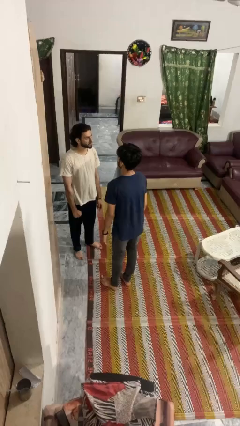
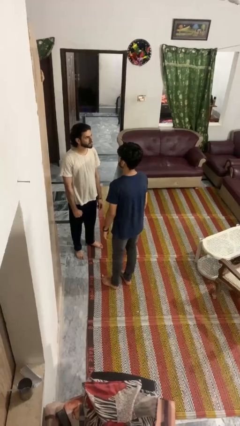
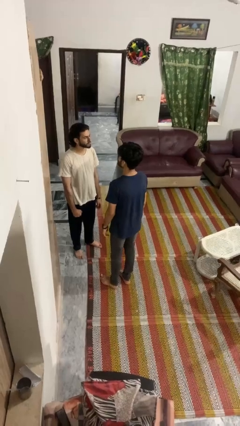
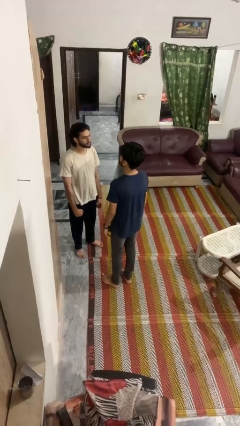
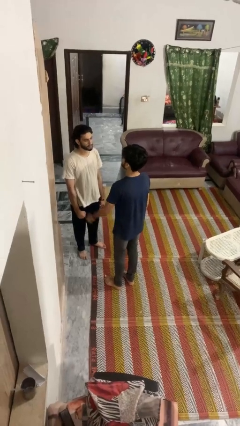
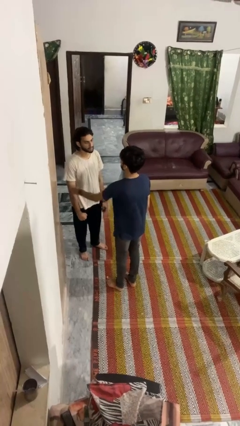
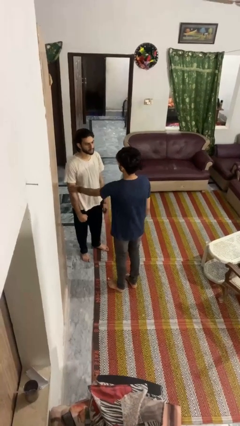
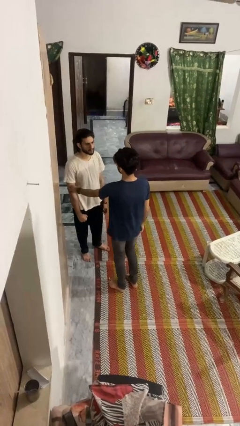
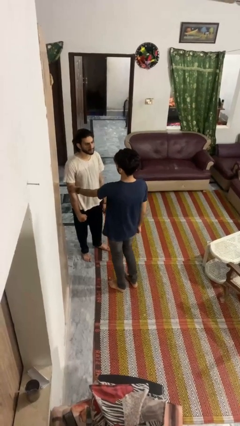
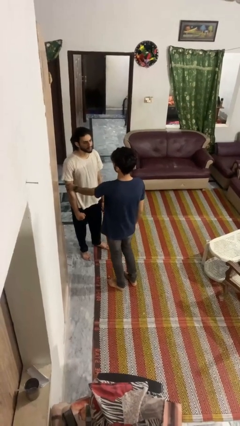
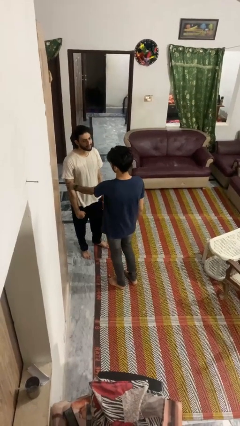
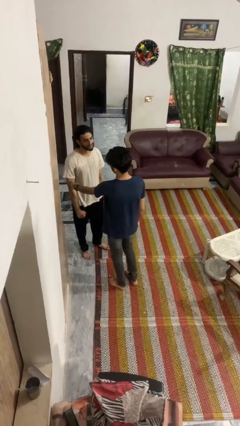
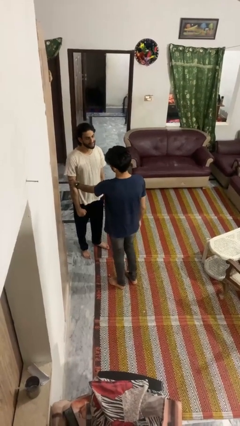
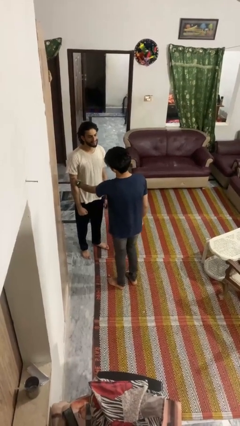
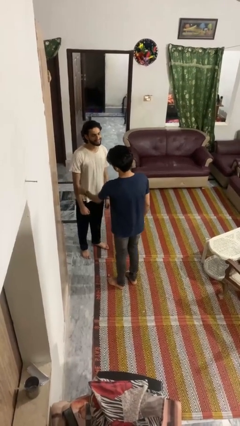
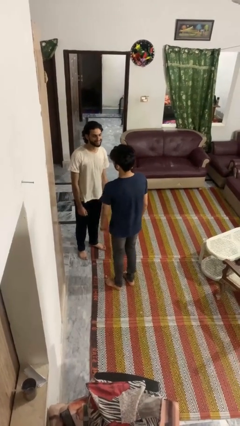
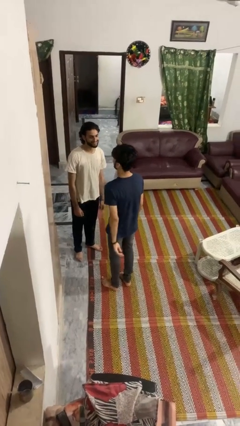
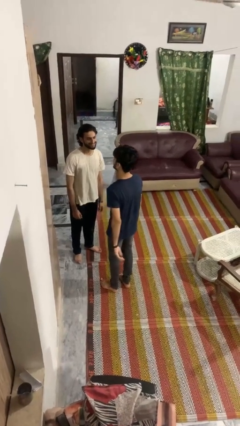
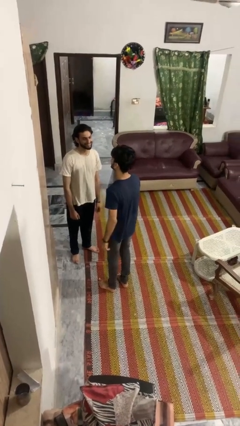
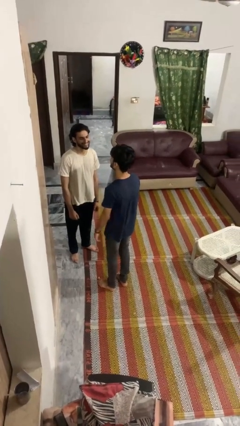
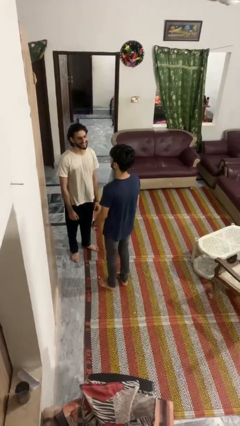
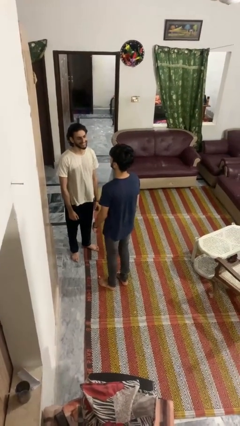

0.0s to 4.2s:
person grabs person by bicep

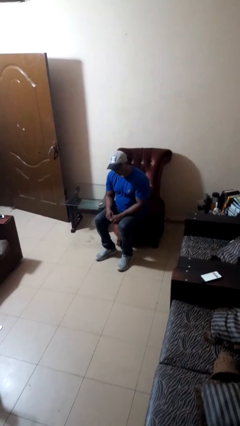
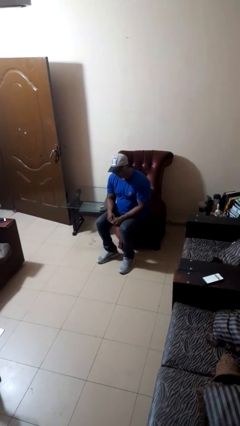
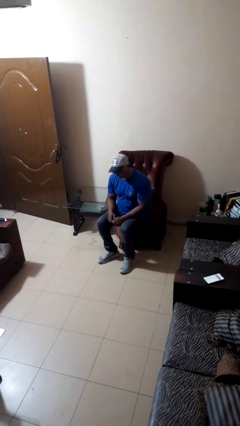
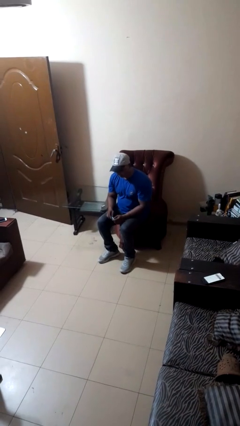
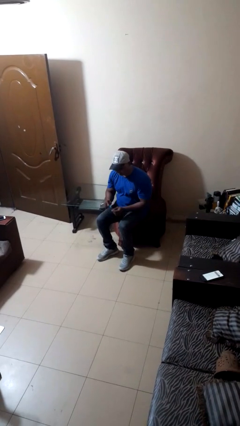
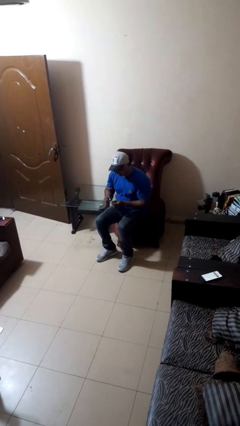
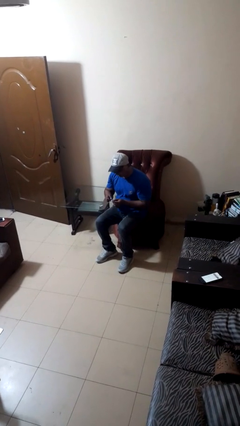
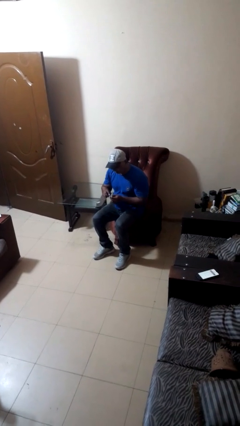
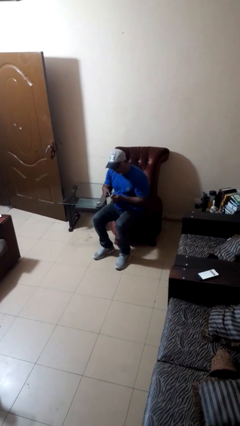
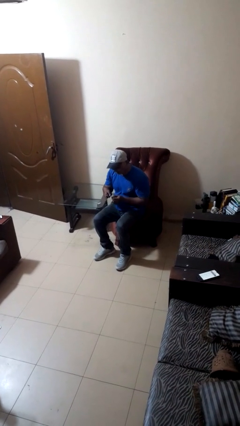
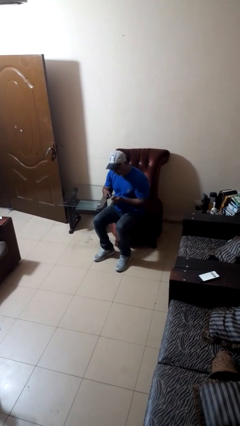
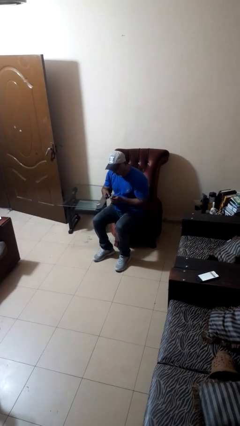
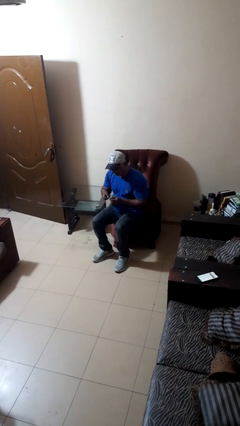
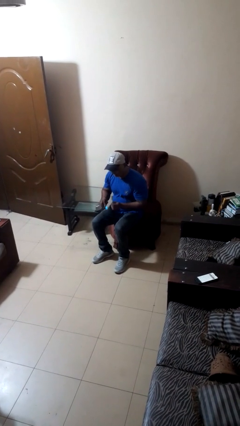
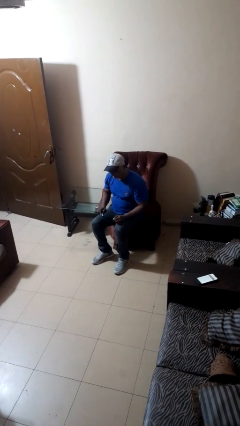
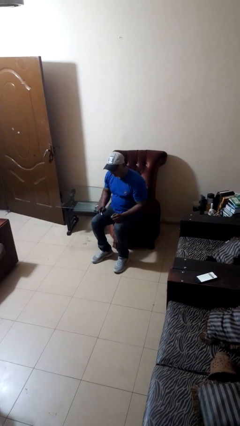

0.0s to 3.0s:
person files fingernails

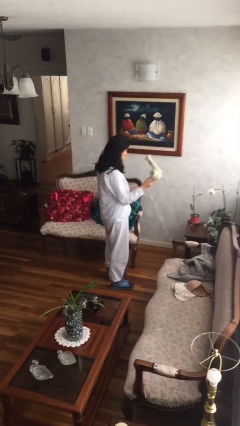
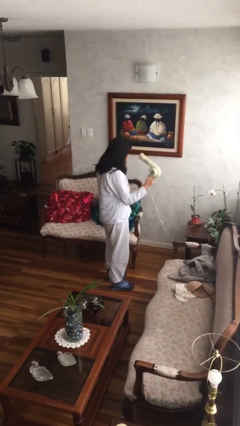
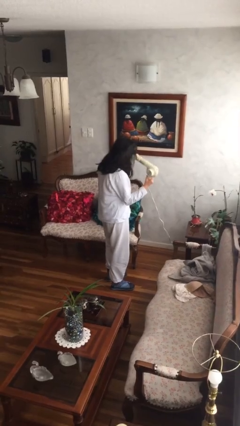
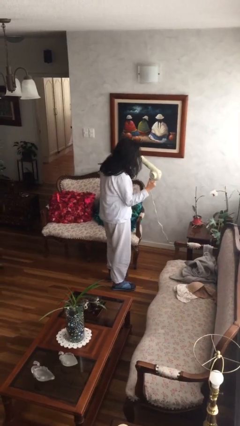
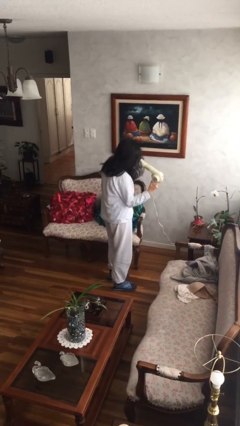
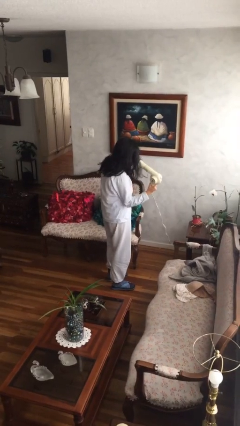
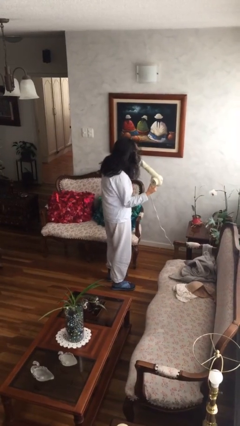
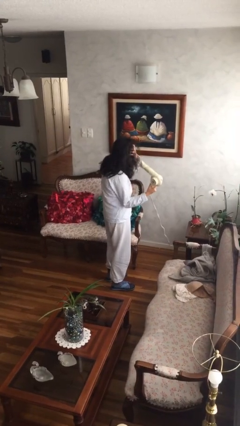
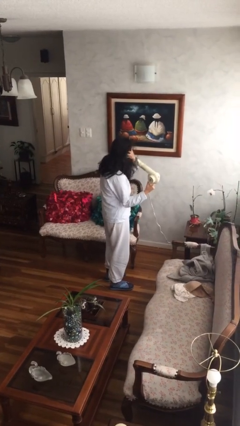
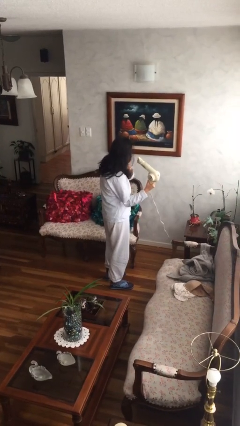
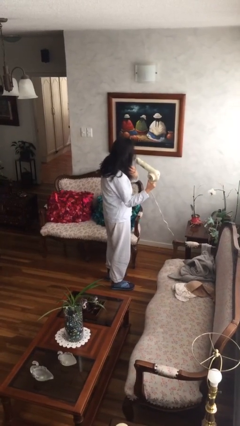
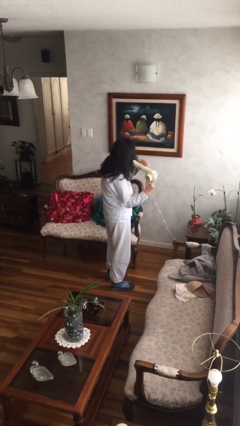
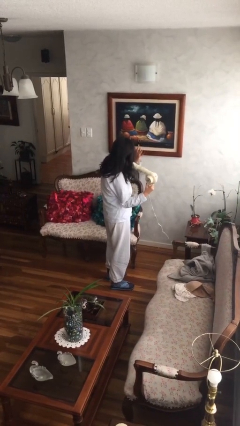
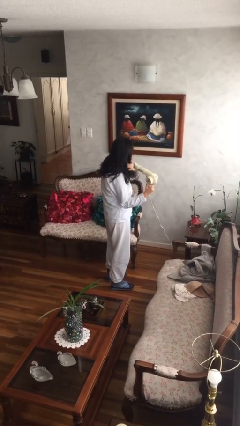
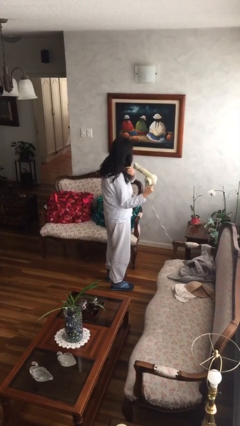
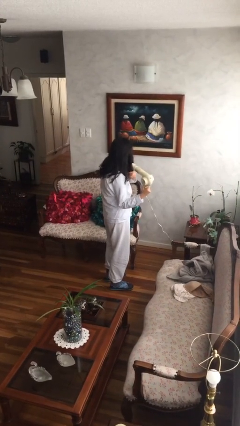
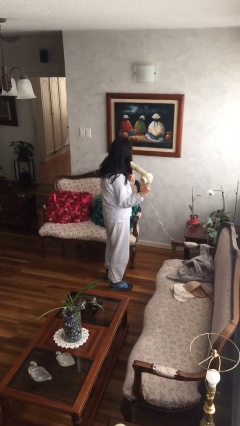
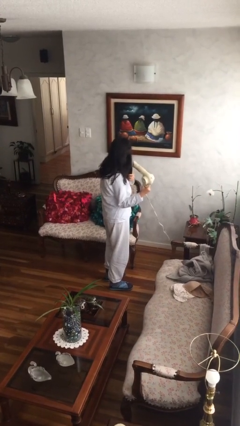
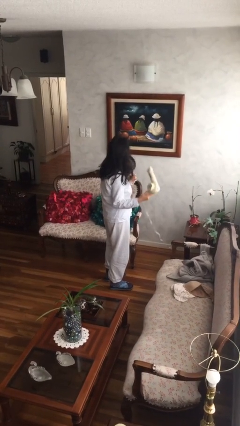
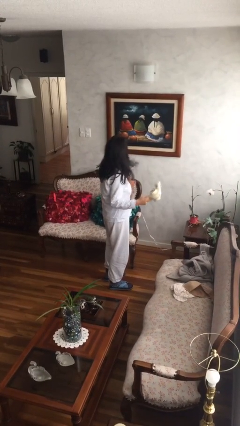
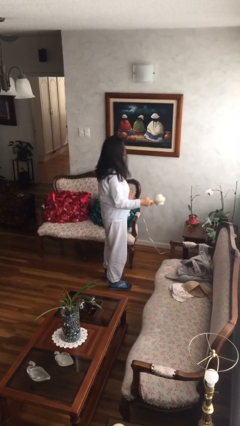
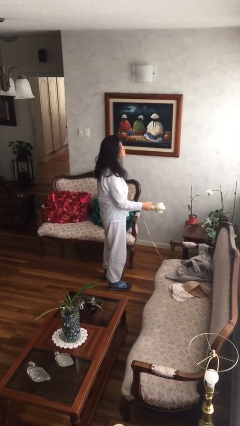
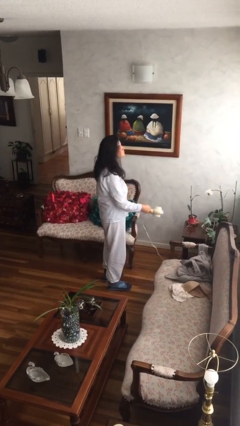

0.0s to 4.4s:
person dries hair with hairdryer

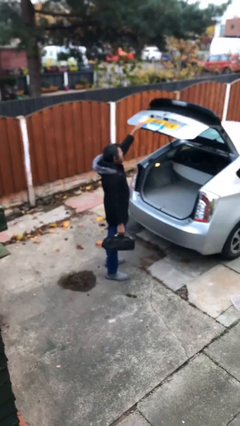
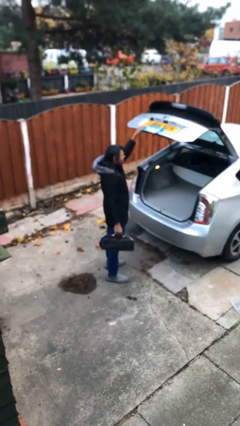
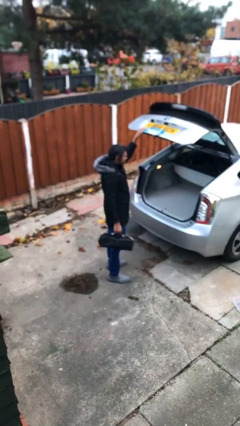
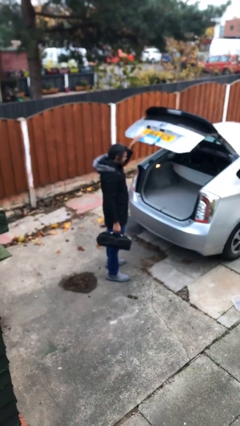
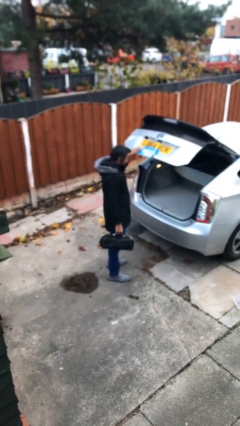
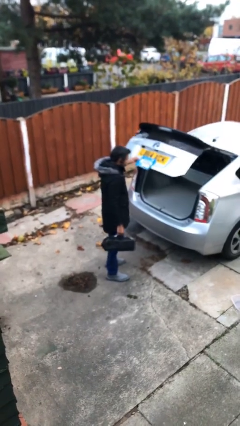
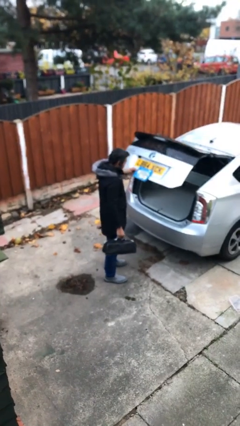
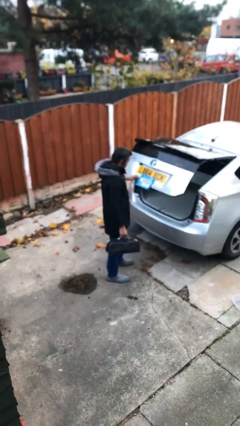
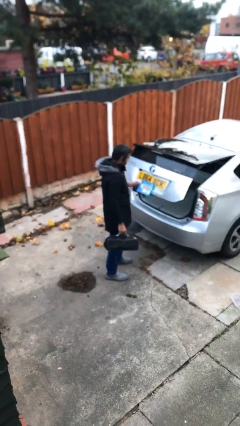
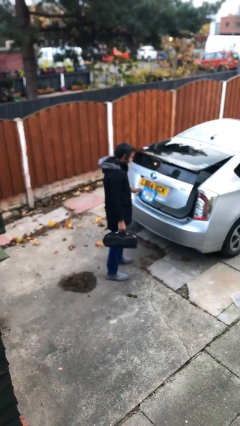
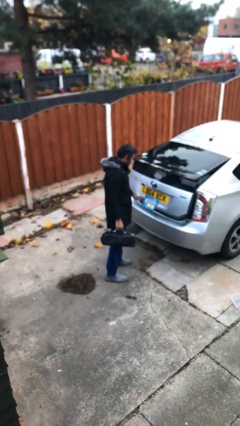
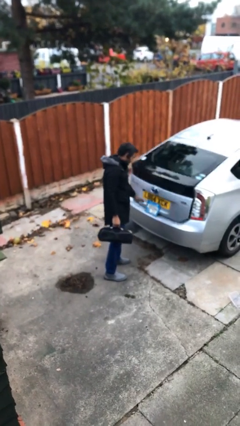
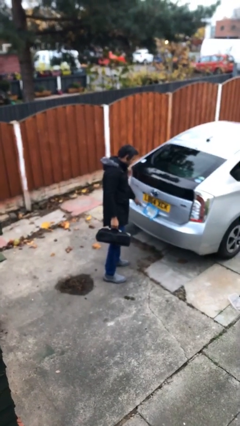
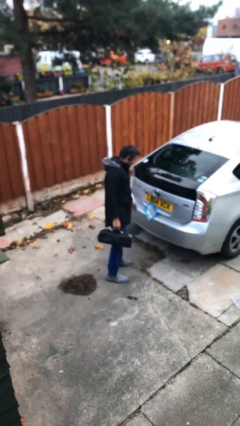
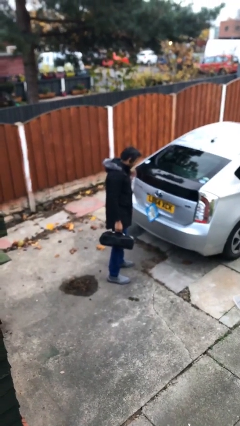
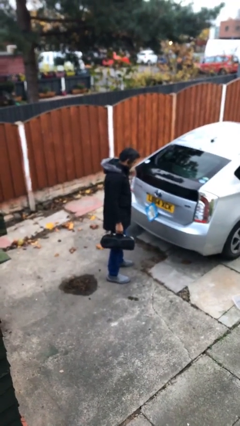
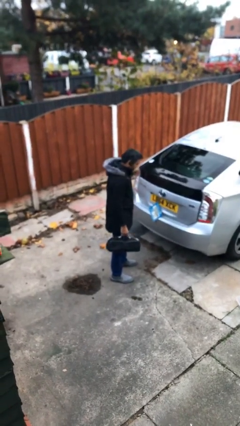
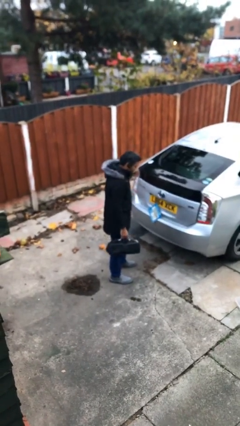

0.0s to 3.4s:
person closes car trunk

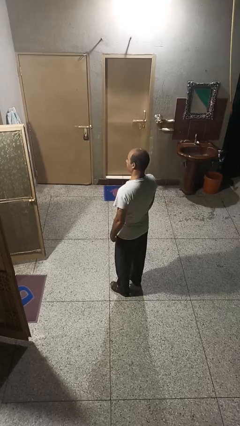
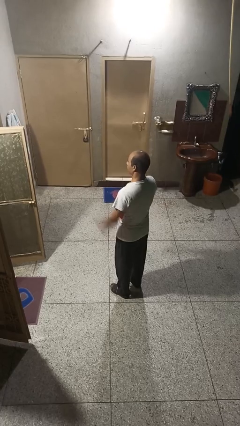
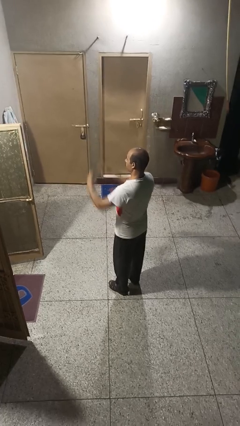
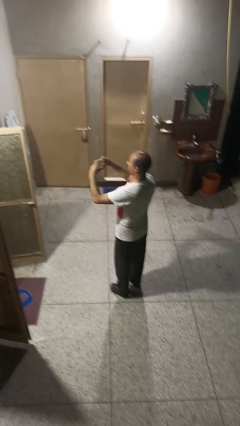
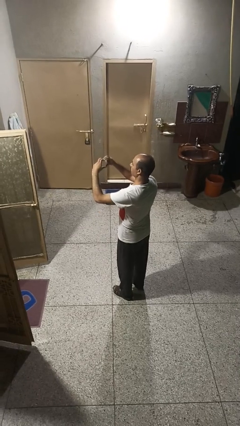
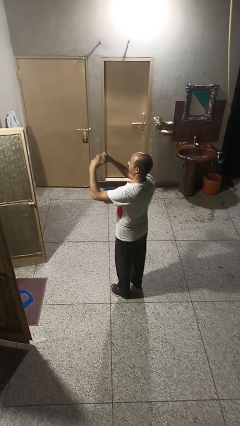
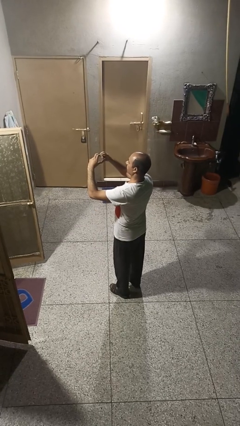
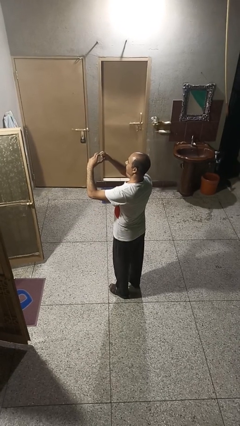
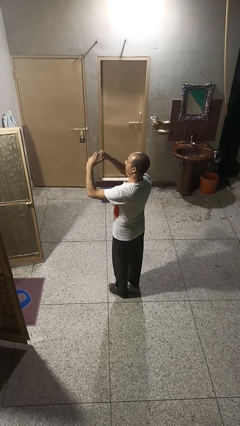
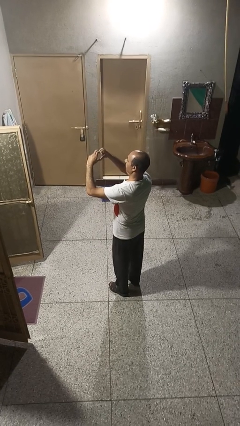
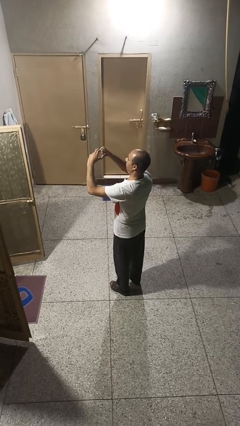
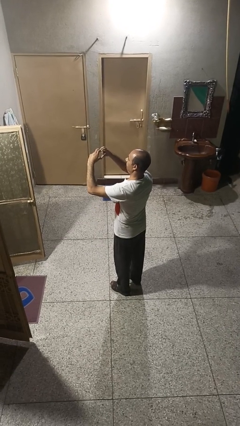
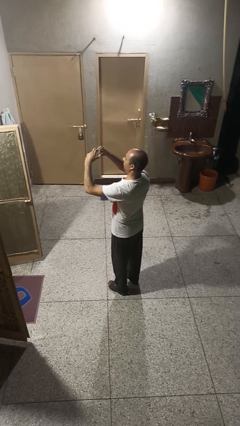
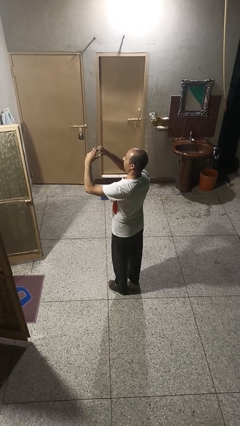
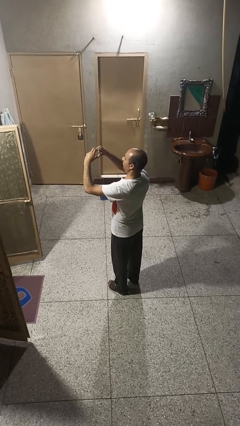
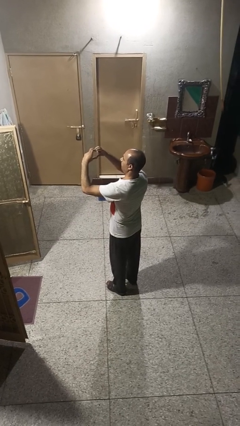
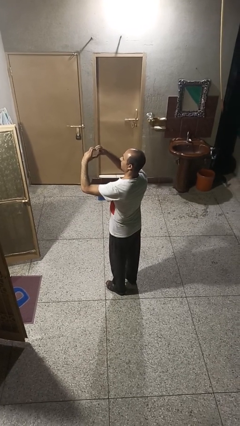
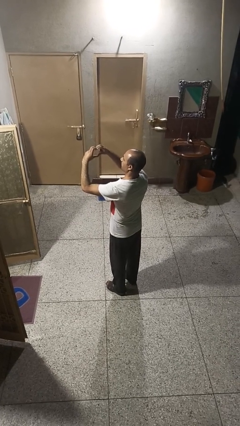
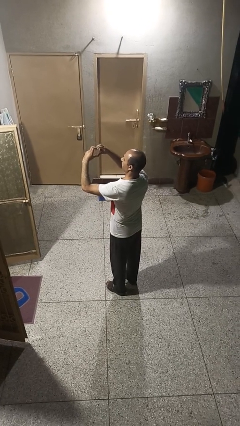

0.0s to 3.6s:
person gestures heart
